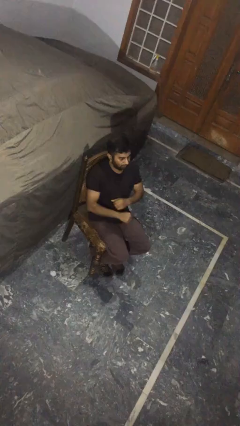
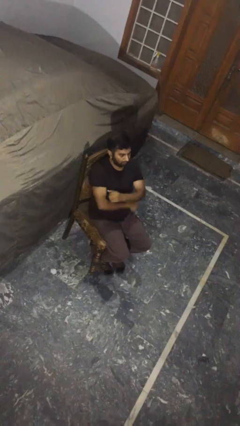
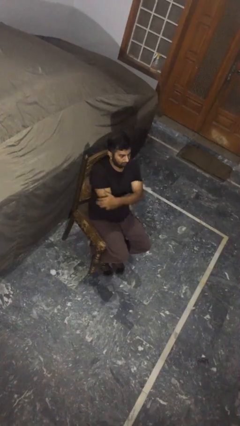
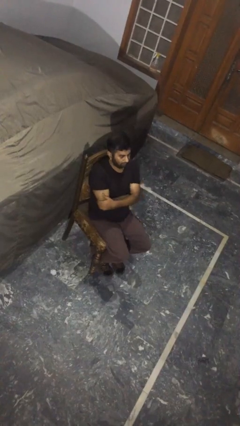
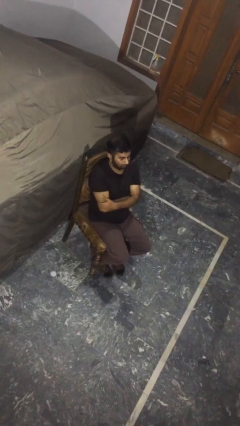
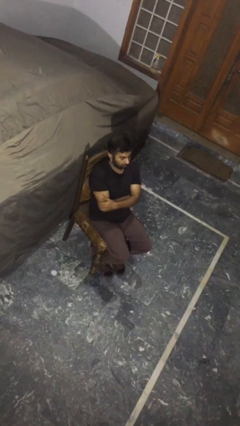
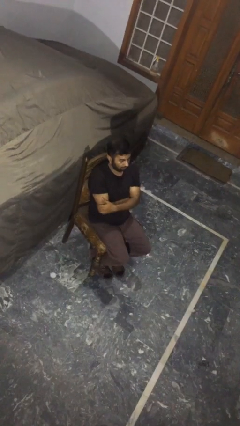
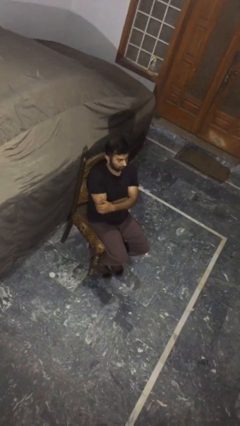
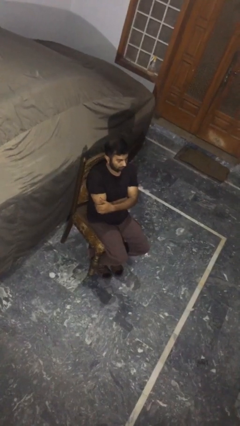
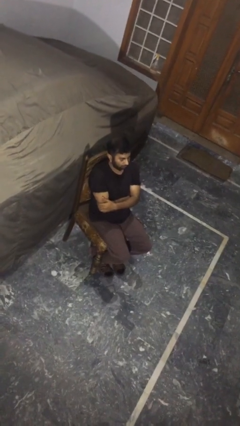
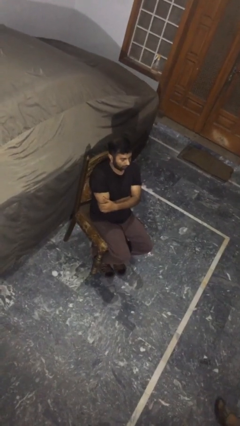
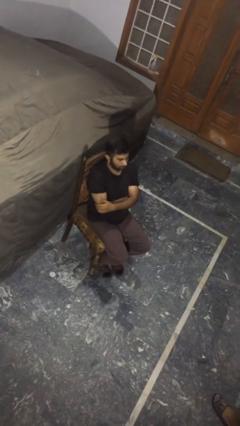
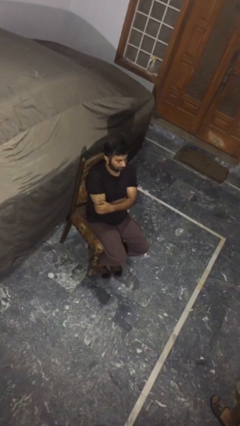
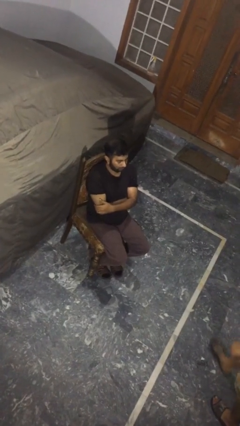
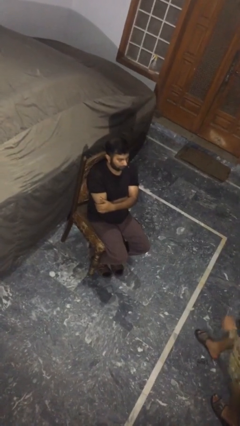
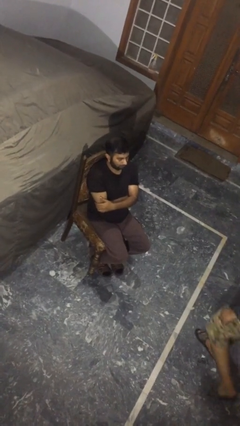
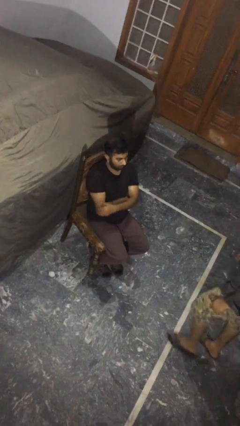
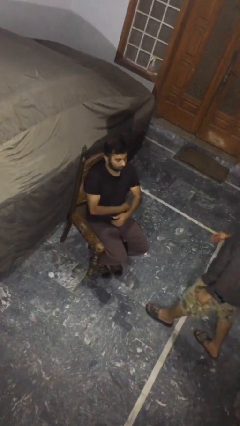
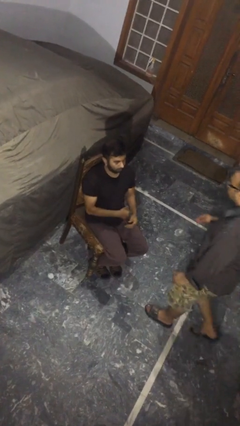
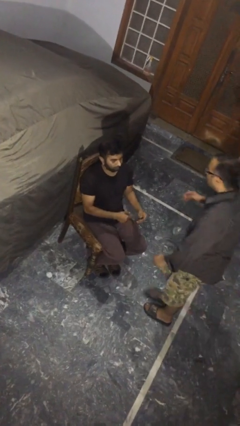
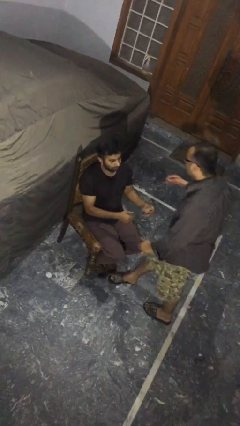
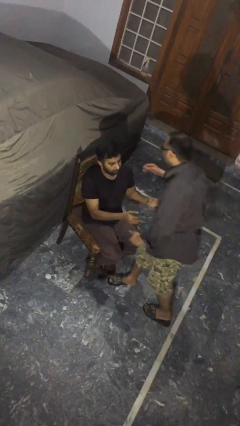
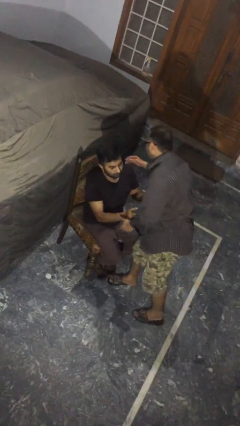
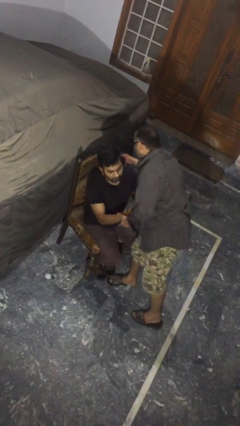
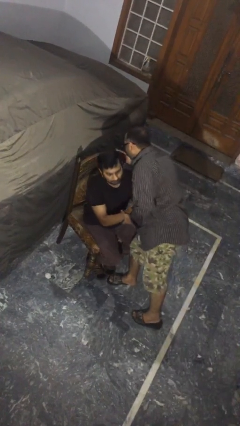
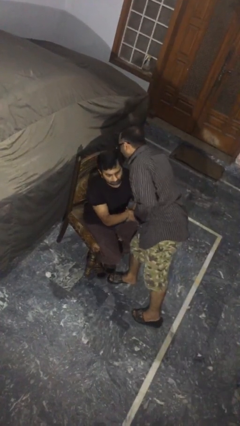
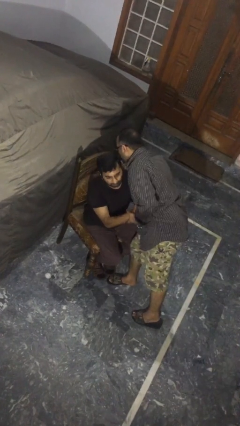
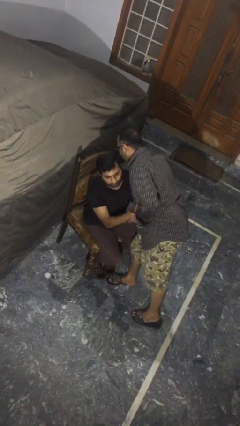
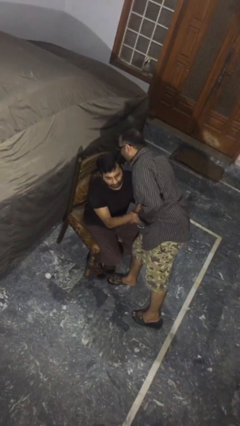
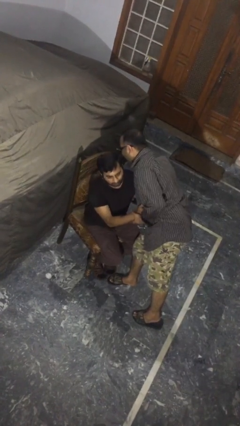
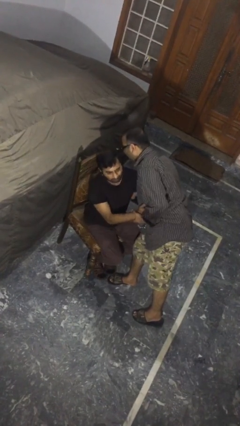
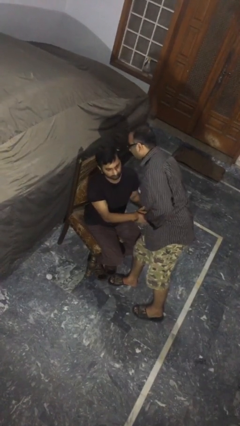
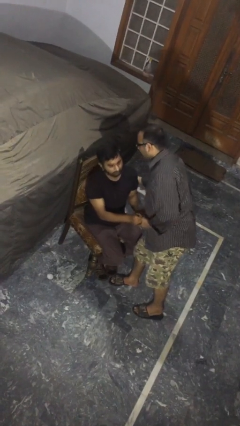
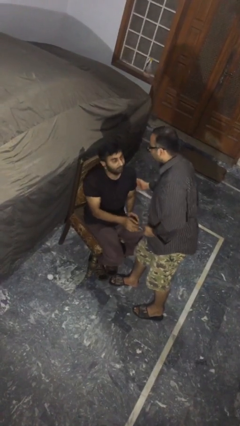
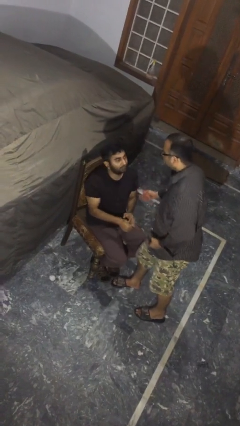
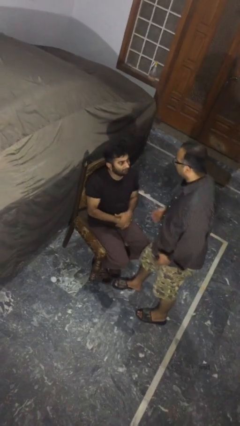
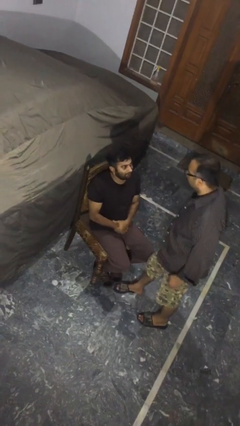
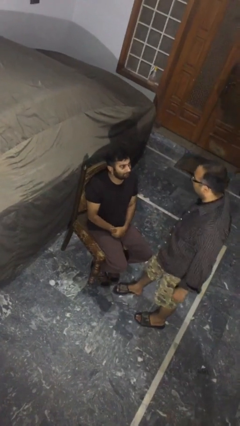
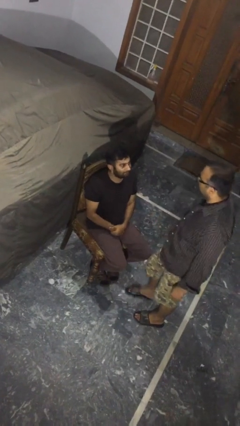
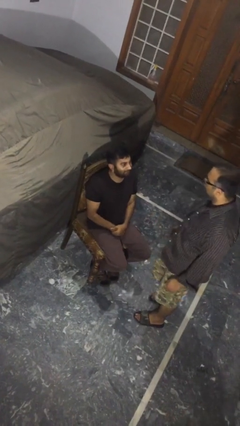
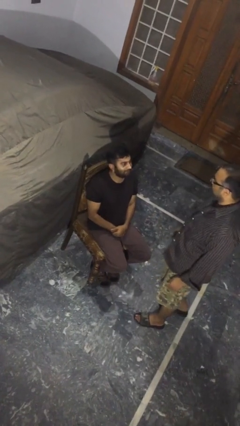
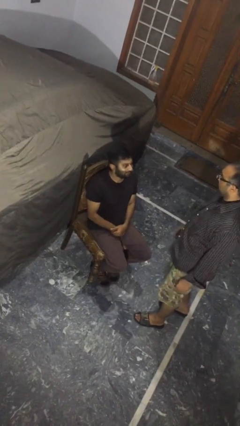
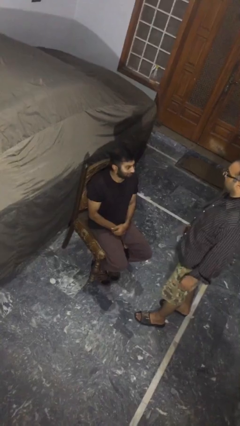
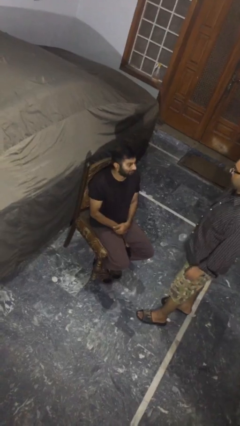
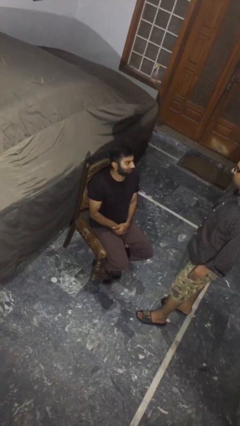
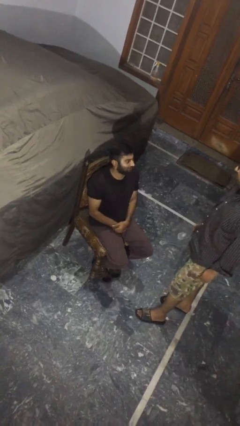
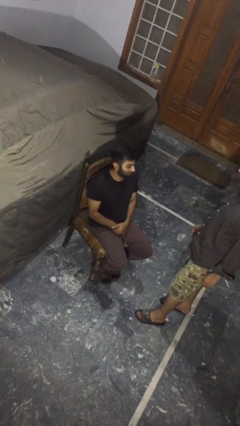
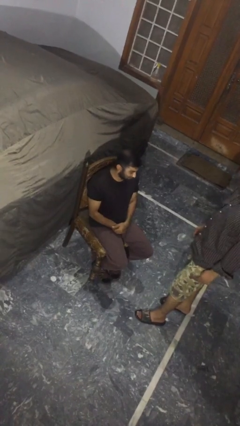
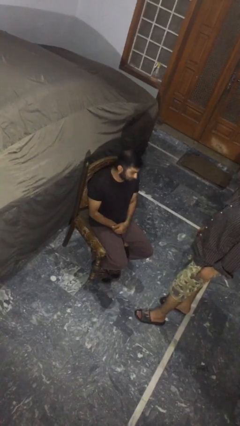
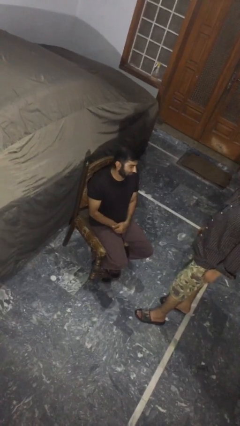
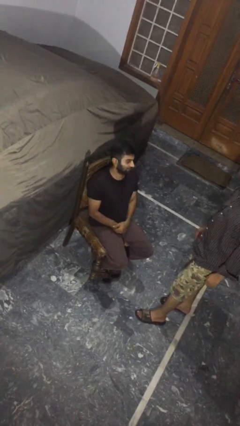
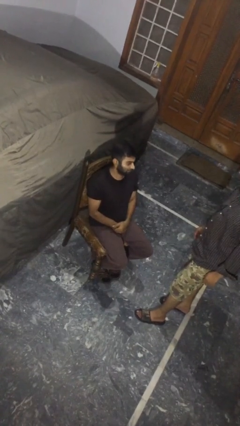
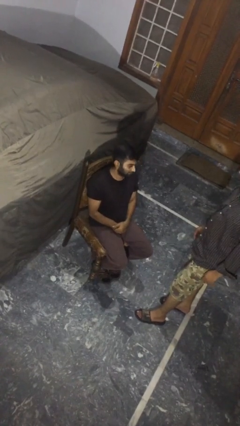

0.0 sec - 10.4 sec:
person embraces person

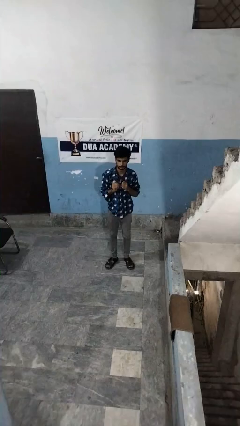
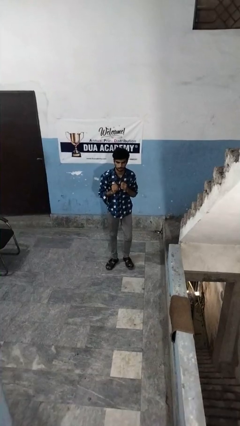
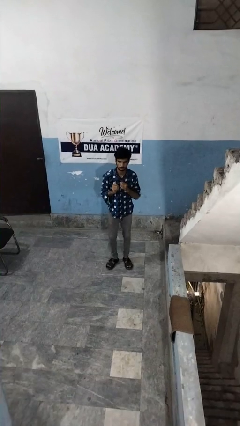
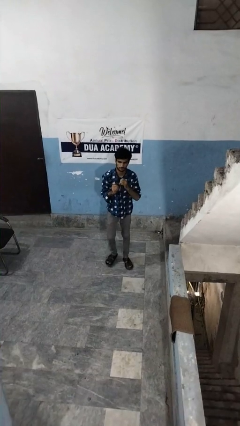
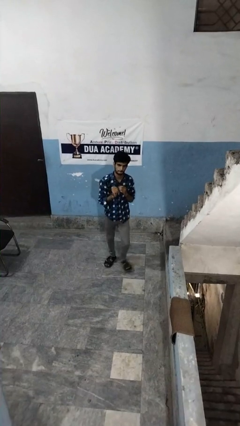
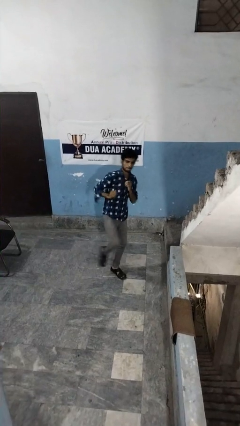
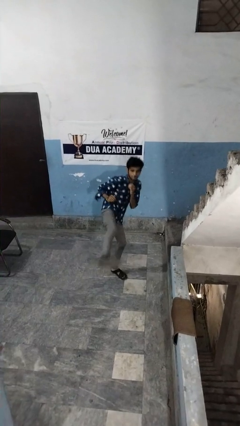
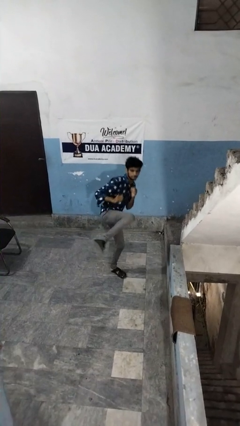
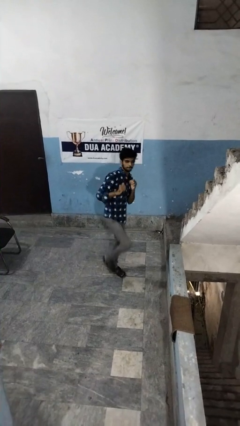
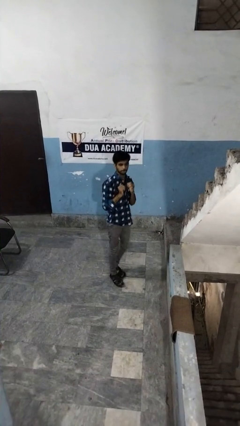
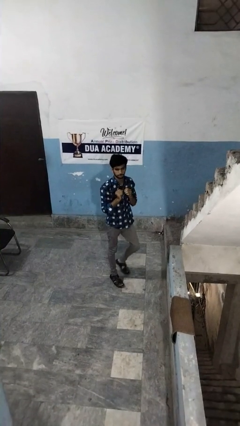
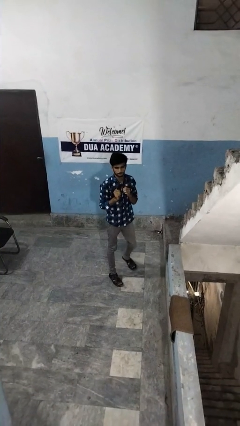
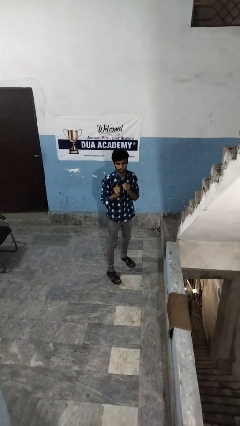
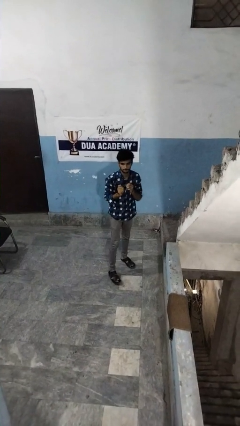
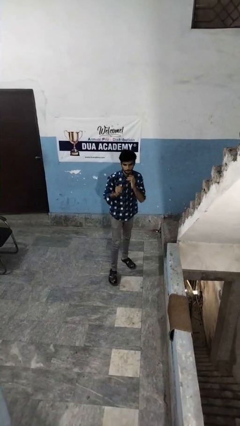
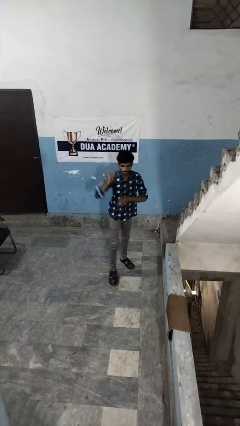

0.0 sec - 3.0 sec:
person karate kicks

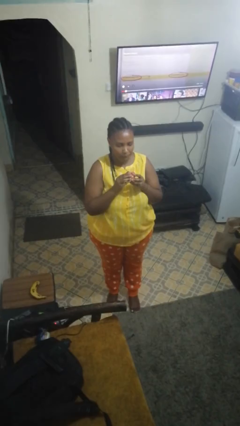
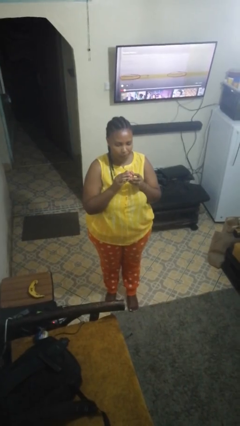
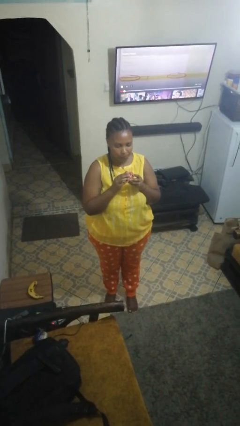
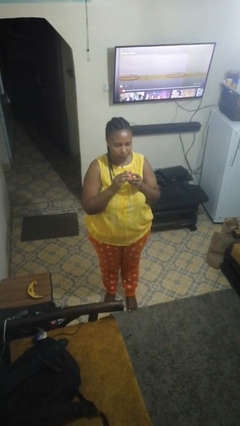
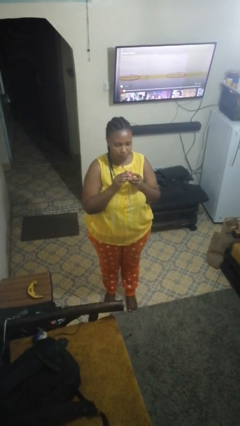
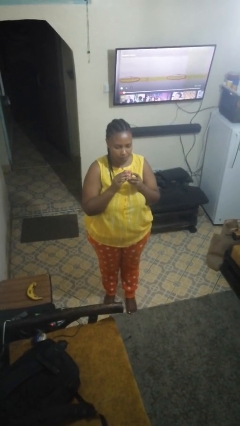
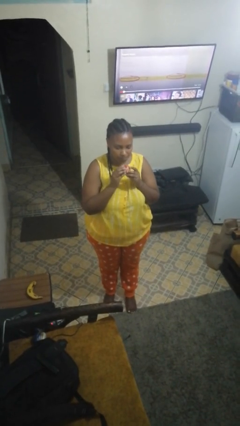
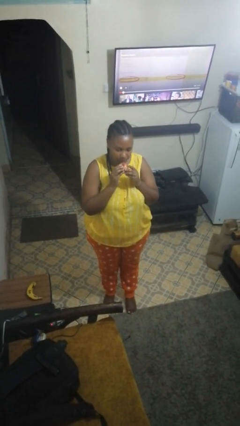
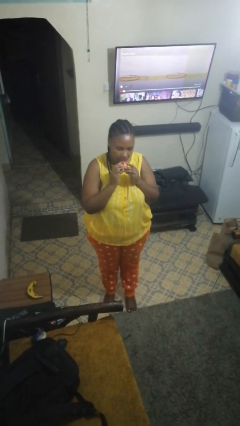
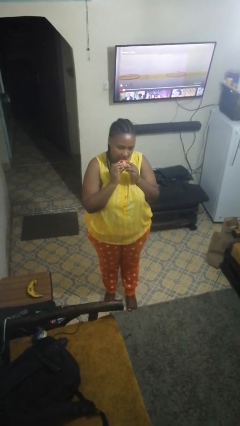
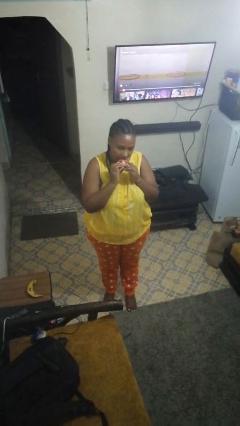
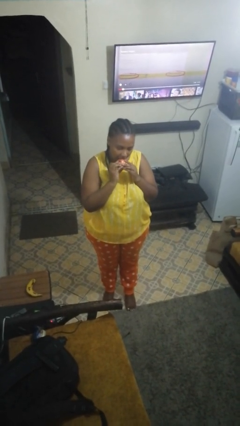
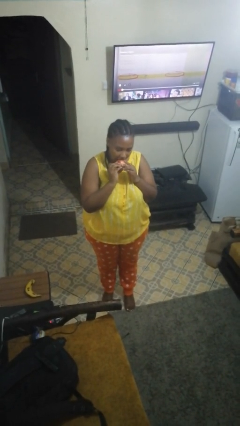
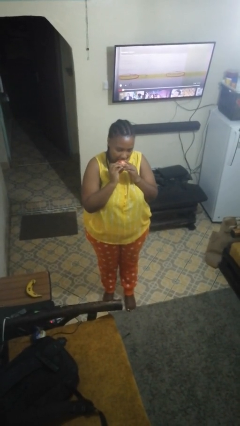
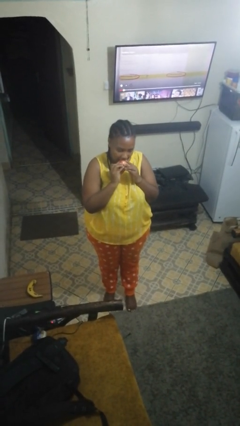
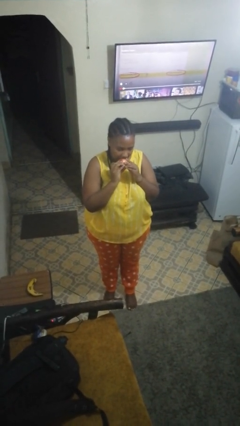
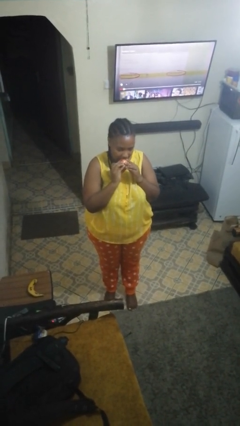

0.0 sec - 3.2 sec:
person eats apple

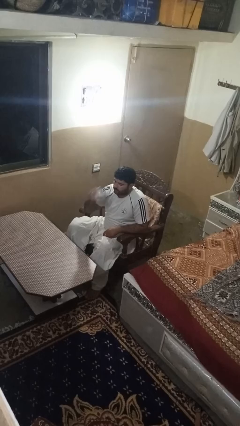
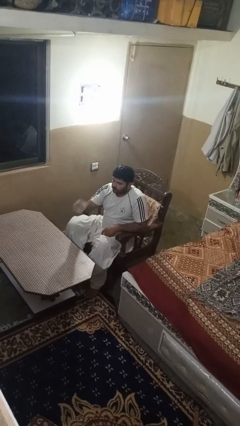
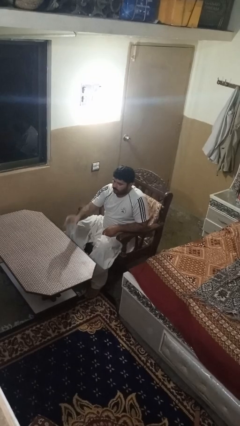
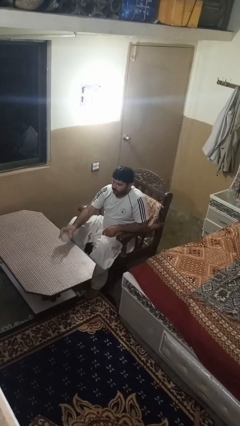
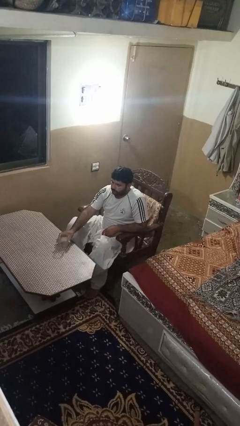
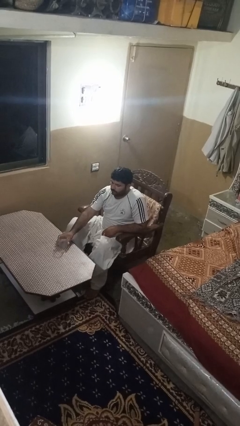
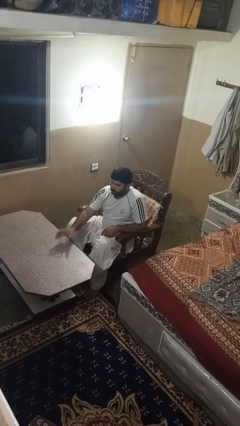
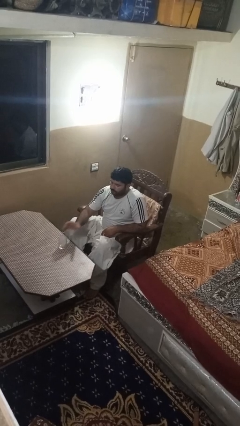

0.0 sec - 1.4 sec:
person puts down object on table
